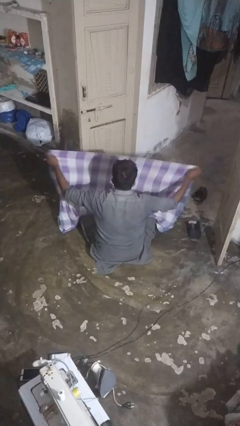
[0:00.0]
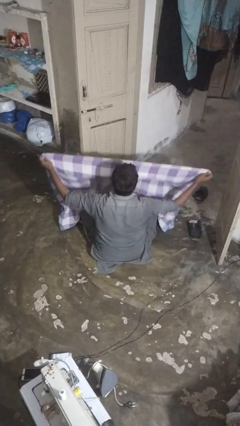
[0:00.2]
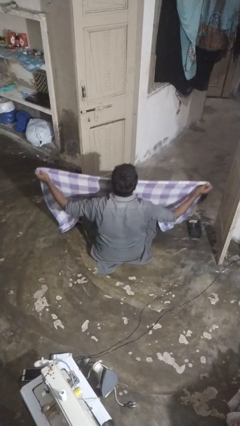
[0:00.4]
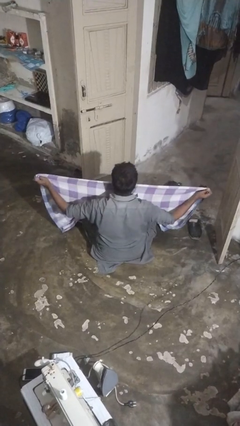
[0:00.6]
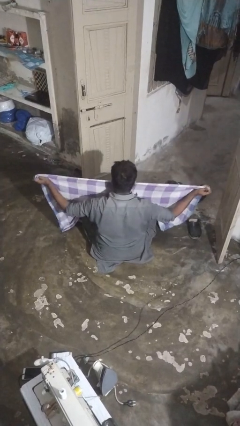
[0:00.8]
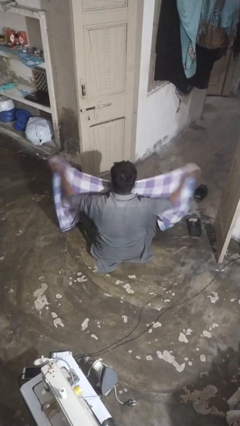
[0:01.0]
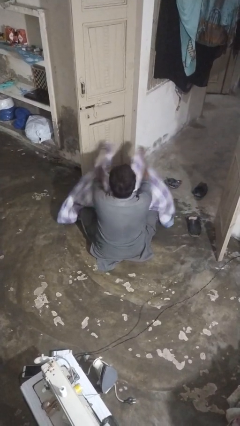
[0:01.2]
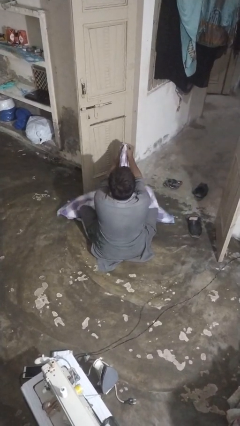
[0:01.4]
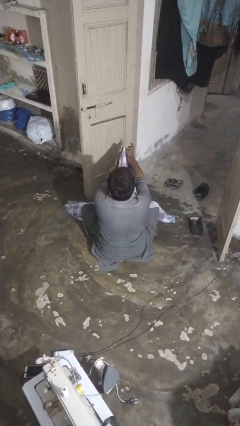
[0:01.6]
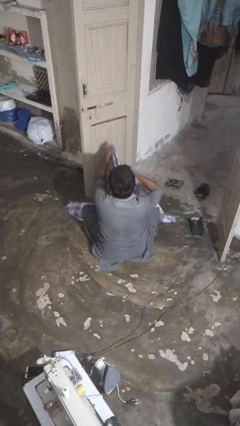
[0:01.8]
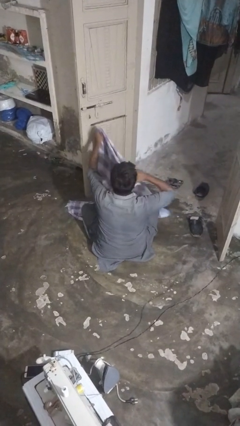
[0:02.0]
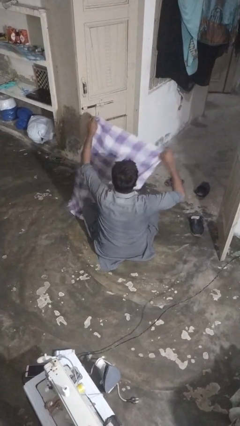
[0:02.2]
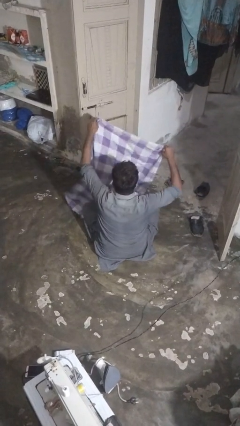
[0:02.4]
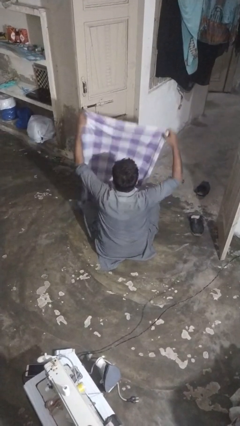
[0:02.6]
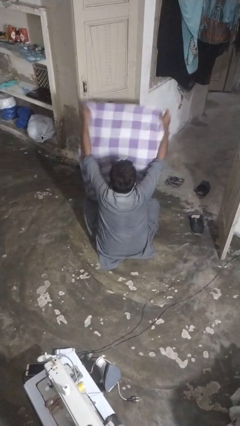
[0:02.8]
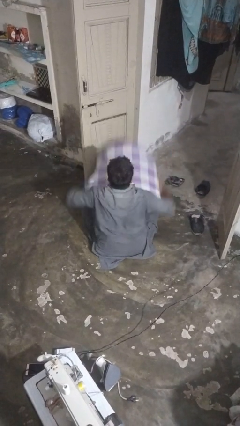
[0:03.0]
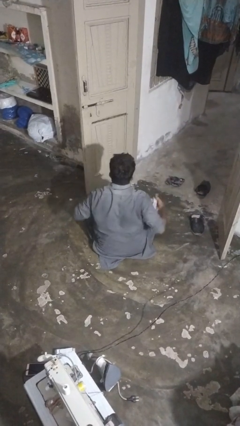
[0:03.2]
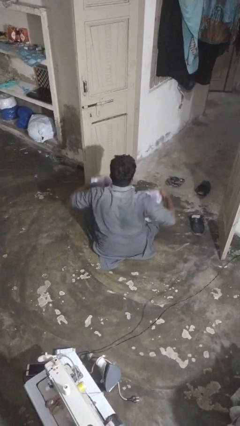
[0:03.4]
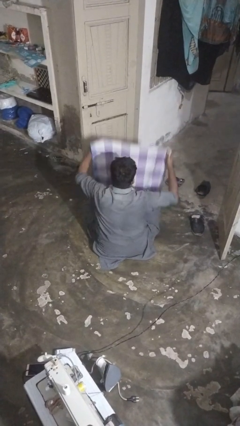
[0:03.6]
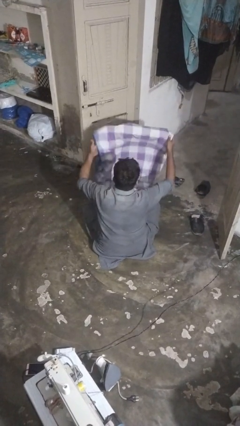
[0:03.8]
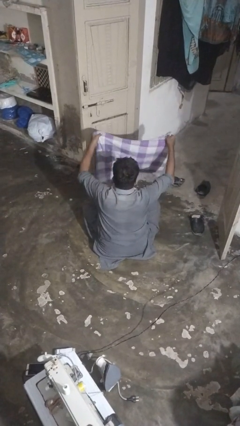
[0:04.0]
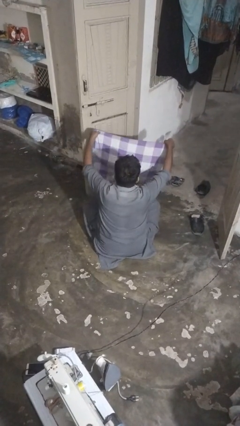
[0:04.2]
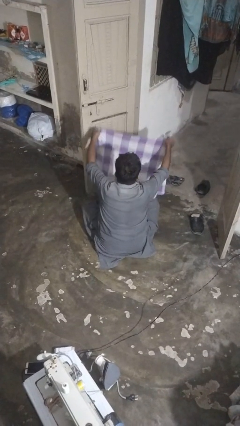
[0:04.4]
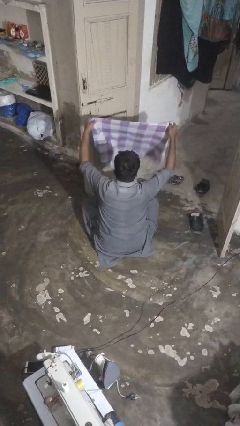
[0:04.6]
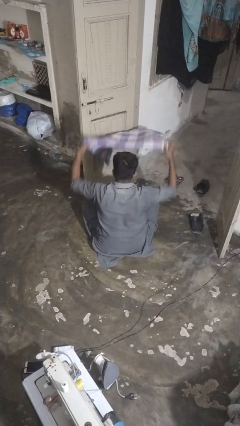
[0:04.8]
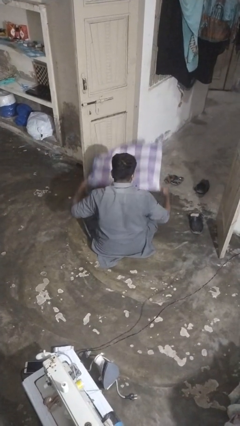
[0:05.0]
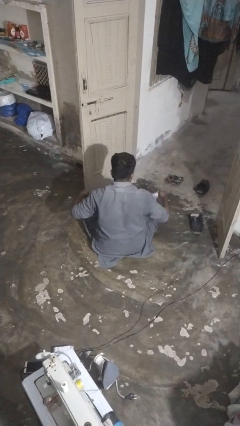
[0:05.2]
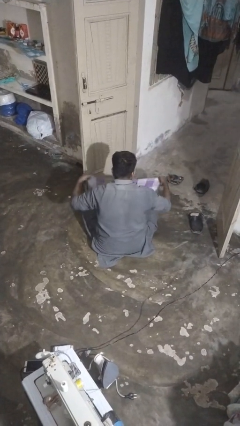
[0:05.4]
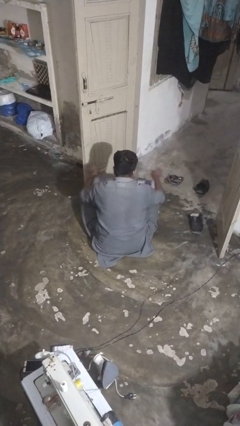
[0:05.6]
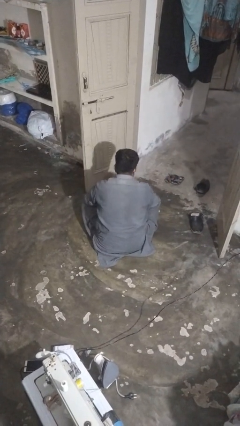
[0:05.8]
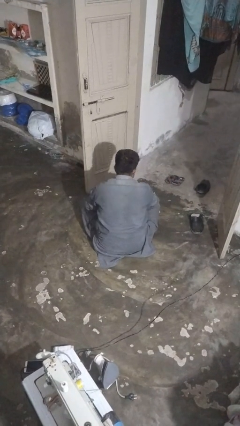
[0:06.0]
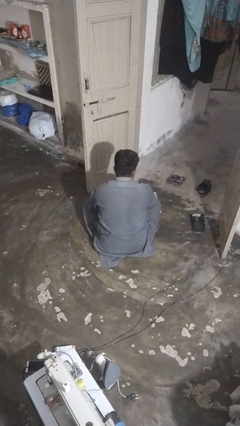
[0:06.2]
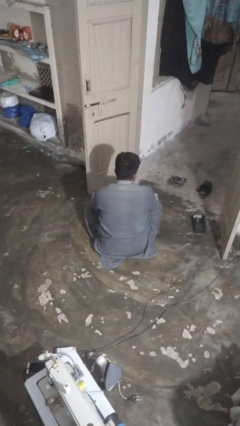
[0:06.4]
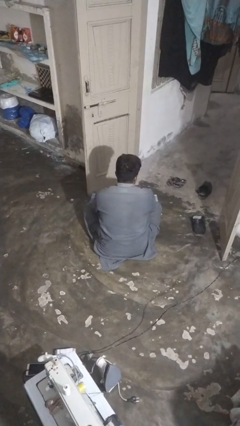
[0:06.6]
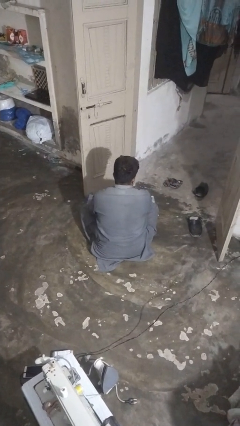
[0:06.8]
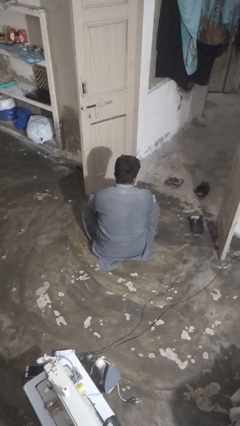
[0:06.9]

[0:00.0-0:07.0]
person folds blanket

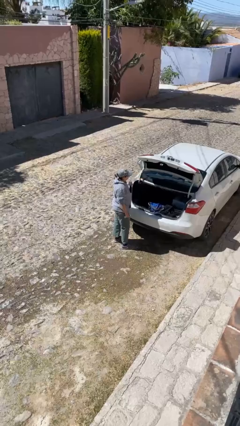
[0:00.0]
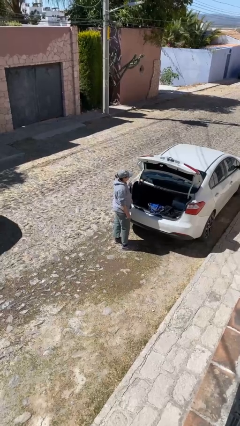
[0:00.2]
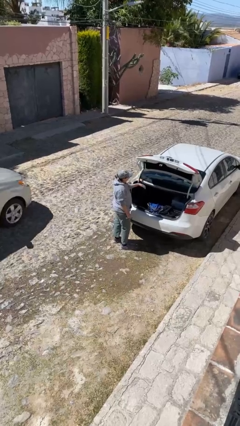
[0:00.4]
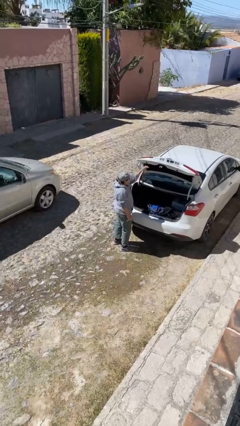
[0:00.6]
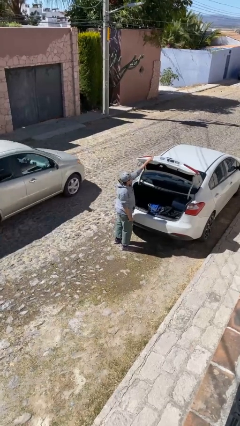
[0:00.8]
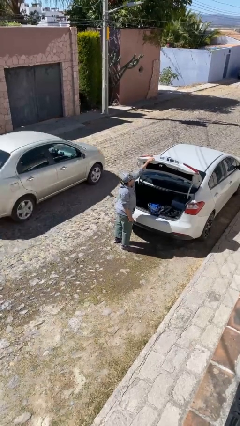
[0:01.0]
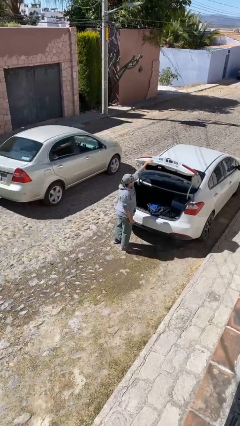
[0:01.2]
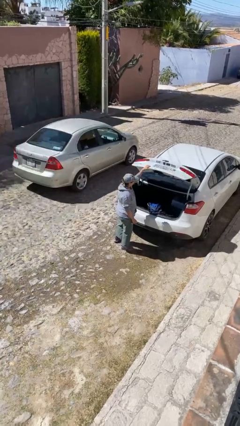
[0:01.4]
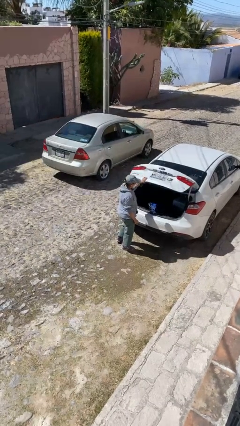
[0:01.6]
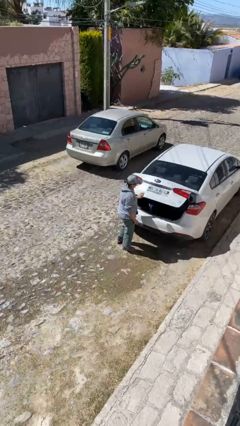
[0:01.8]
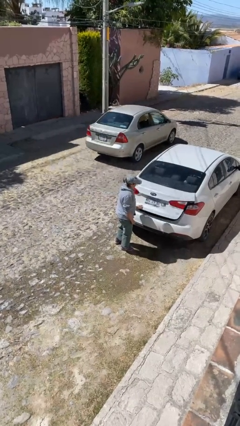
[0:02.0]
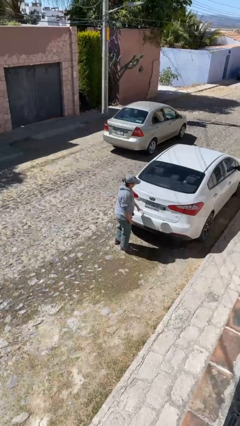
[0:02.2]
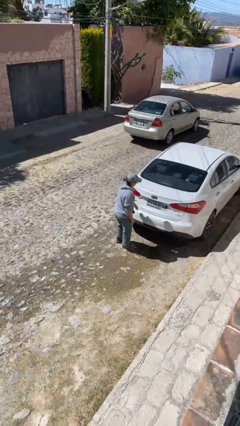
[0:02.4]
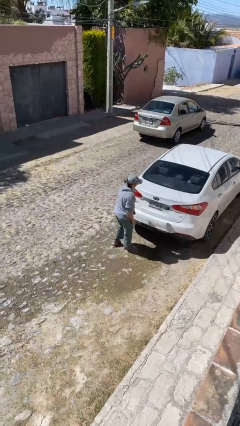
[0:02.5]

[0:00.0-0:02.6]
person closes car trunk

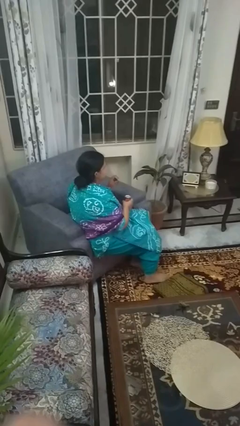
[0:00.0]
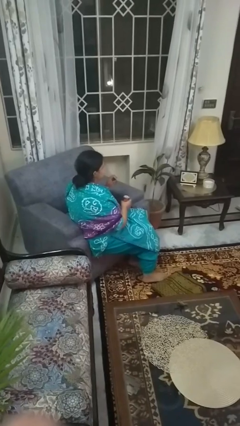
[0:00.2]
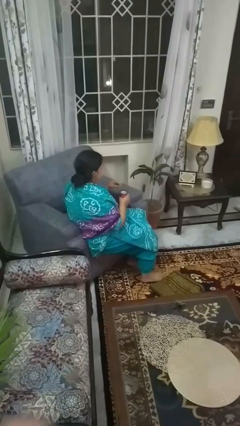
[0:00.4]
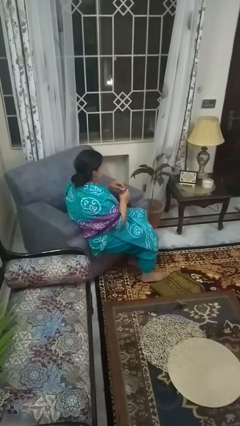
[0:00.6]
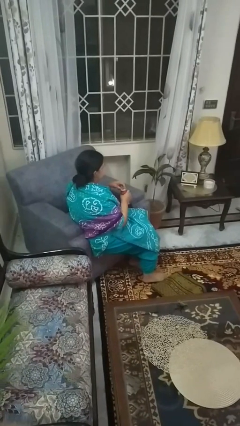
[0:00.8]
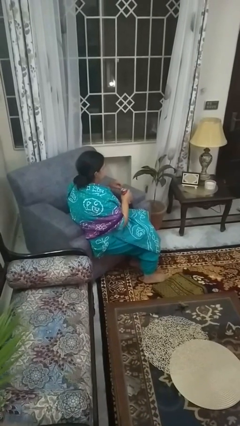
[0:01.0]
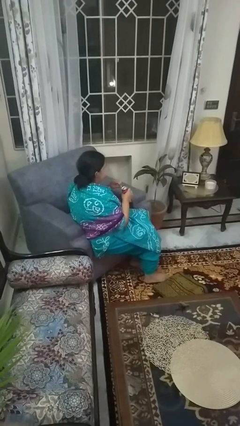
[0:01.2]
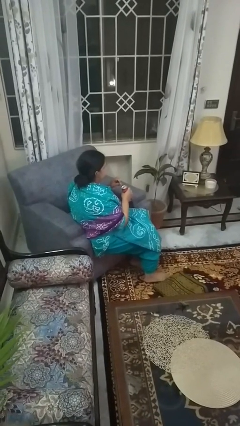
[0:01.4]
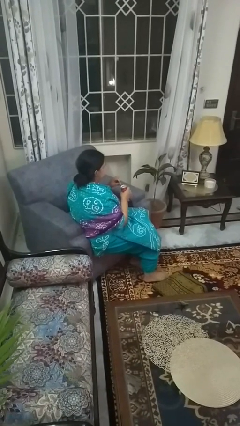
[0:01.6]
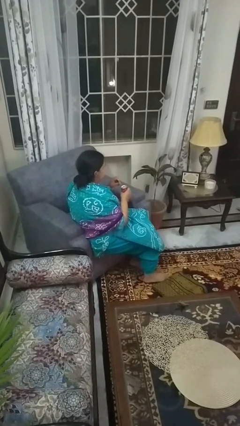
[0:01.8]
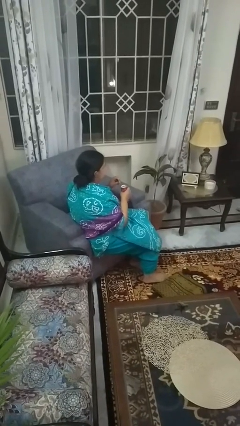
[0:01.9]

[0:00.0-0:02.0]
person opens beverage can

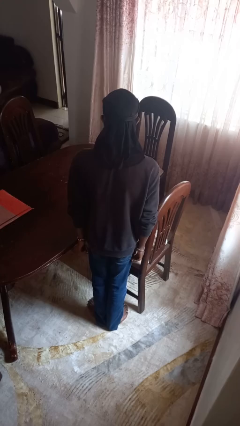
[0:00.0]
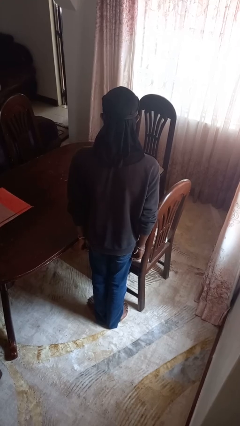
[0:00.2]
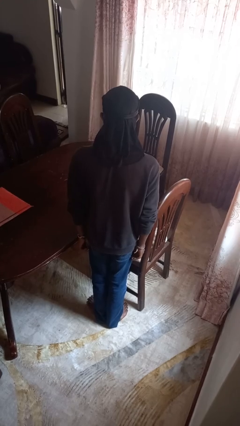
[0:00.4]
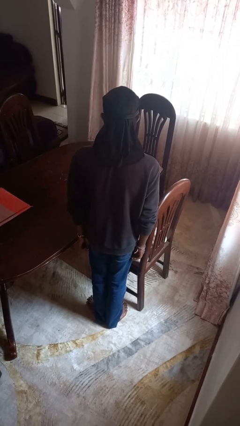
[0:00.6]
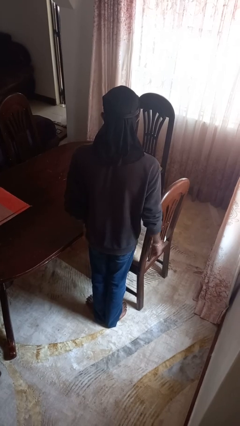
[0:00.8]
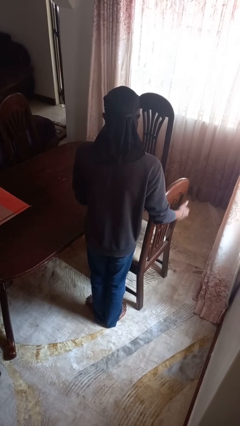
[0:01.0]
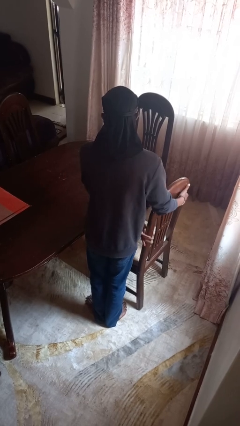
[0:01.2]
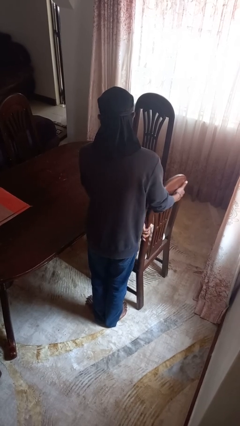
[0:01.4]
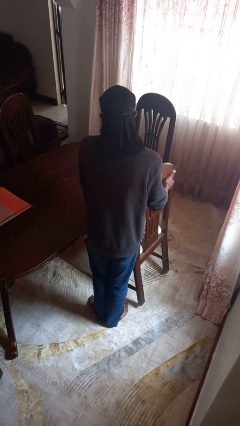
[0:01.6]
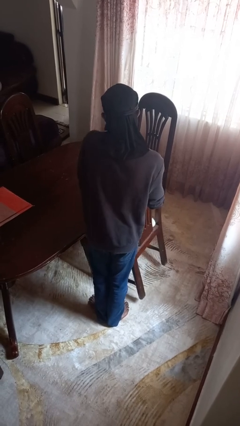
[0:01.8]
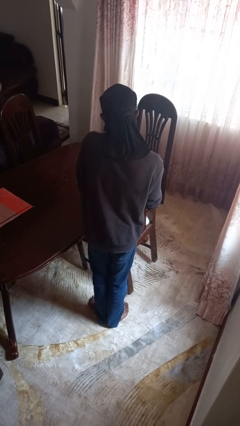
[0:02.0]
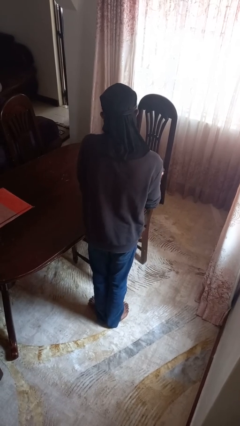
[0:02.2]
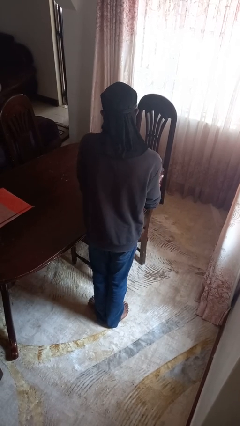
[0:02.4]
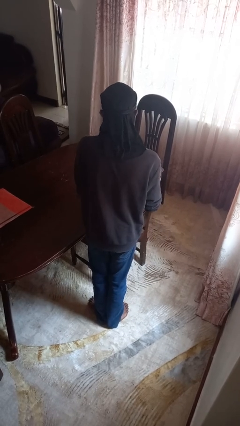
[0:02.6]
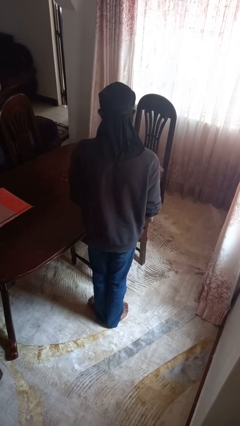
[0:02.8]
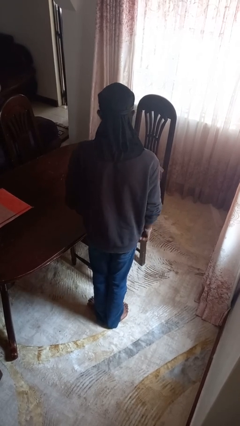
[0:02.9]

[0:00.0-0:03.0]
person pushes in chair

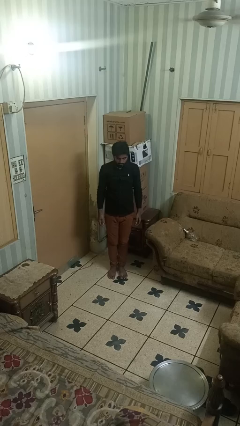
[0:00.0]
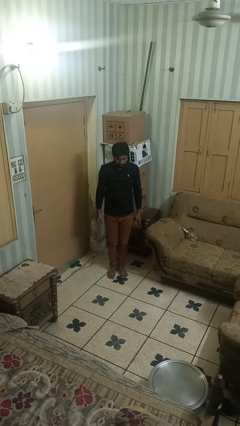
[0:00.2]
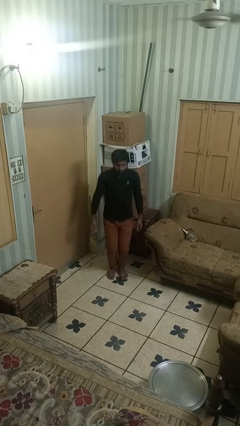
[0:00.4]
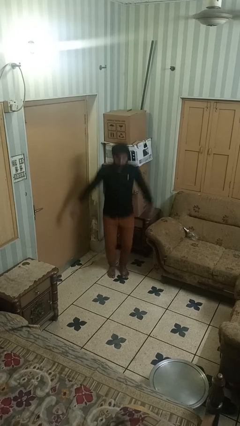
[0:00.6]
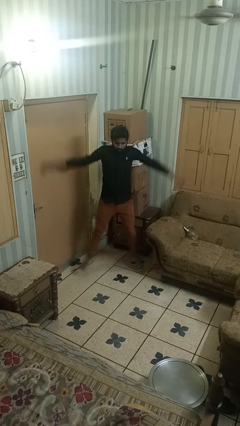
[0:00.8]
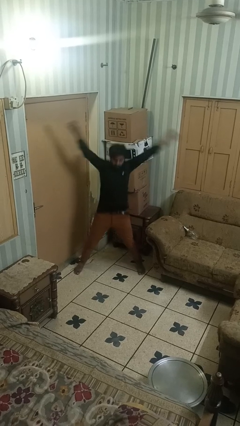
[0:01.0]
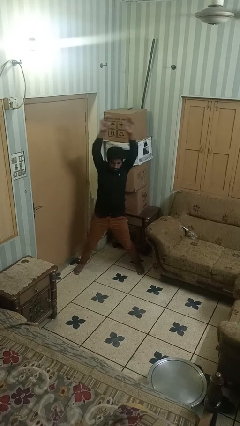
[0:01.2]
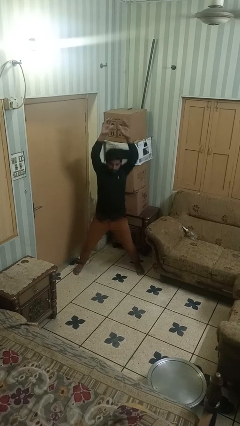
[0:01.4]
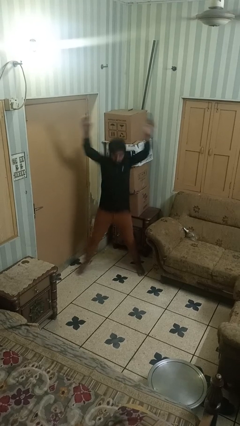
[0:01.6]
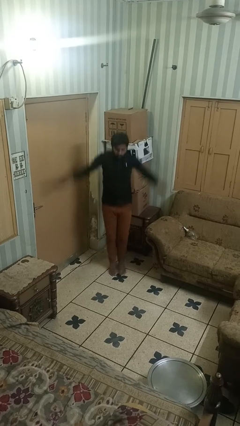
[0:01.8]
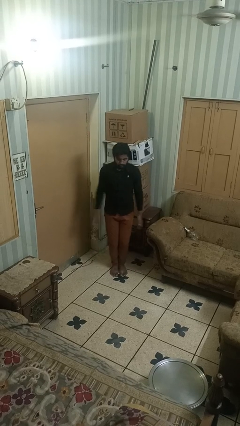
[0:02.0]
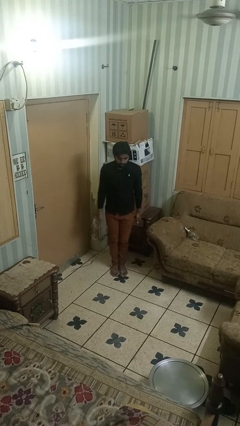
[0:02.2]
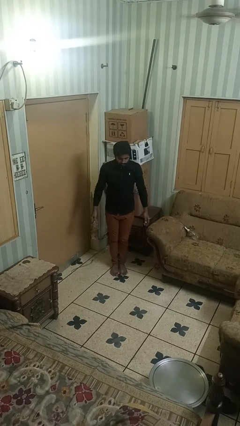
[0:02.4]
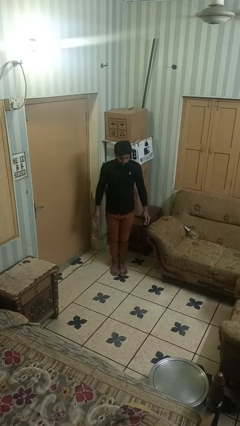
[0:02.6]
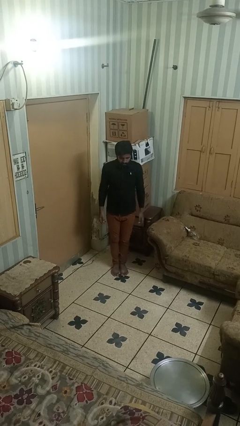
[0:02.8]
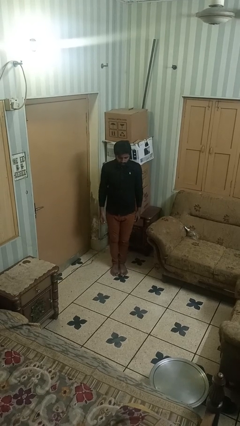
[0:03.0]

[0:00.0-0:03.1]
person exercises with jumping jacks

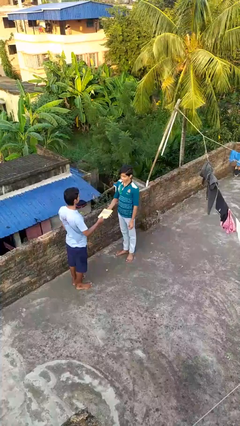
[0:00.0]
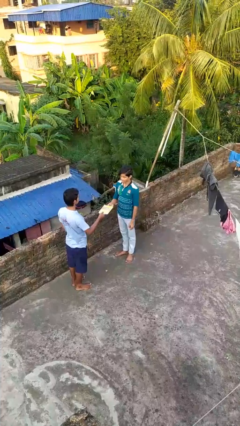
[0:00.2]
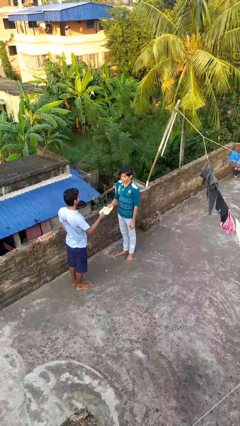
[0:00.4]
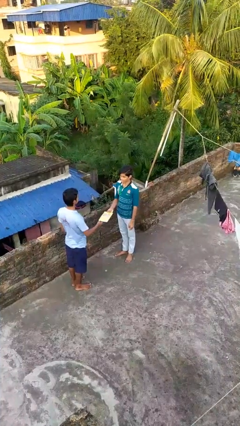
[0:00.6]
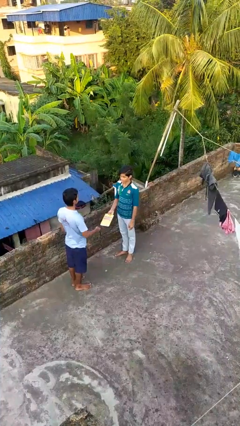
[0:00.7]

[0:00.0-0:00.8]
person transfers object to person
